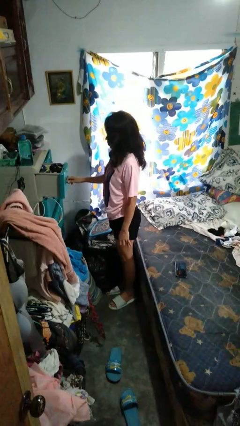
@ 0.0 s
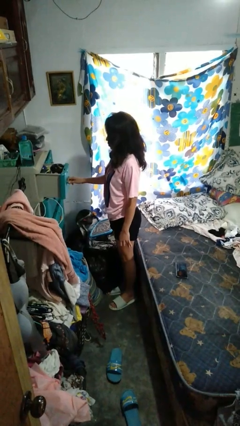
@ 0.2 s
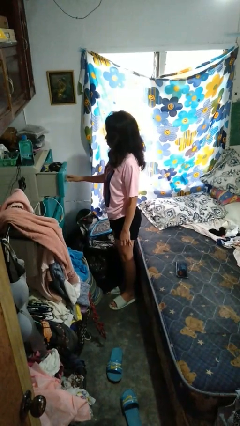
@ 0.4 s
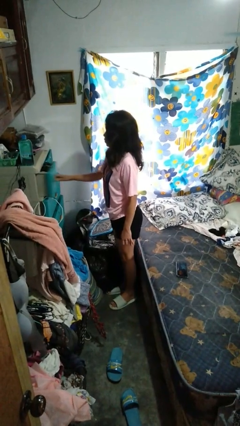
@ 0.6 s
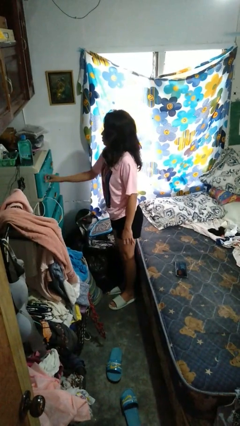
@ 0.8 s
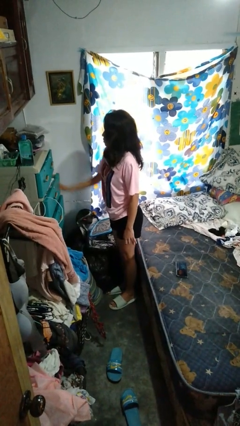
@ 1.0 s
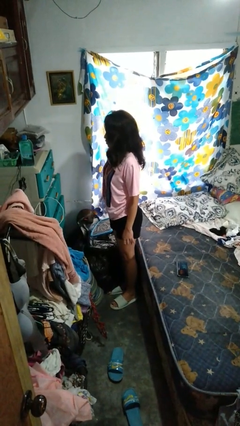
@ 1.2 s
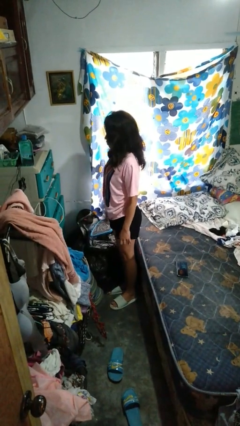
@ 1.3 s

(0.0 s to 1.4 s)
person closes dresser drawer

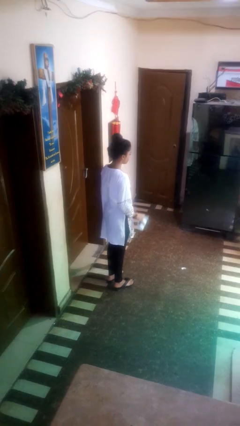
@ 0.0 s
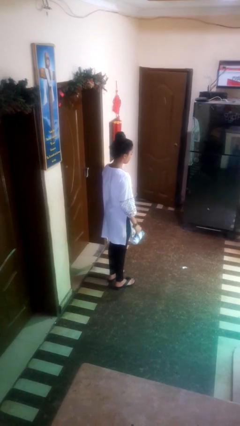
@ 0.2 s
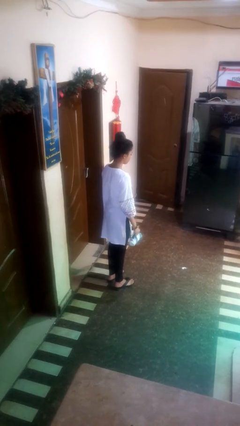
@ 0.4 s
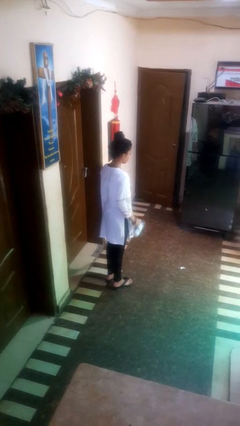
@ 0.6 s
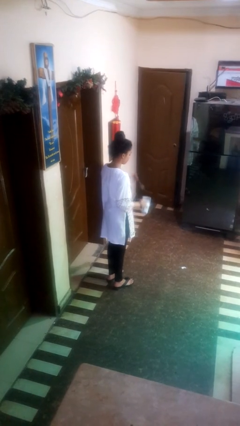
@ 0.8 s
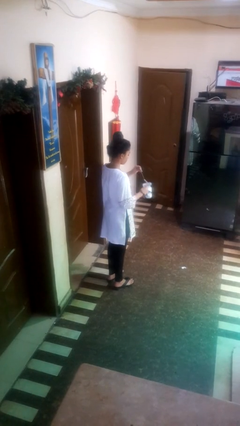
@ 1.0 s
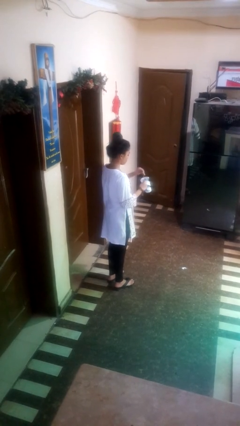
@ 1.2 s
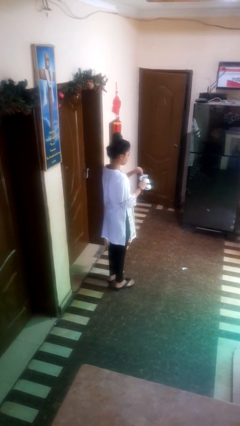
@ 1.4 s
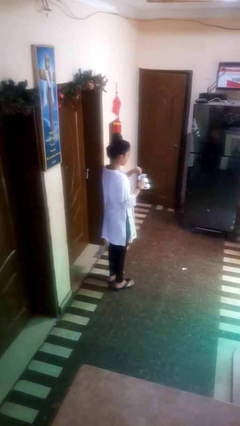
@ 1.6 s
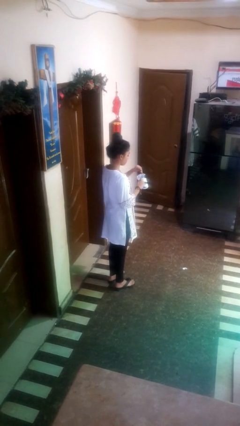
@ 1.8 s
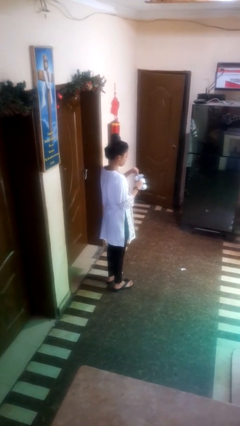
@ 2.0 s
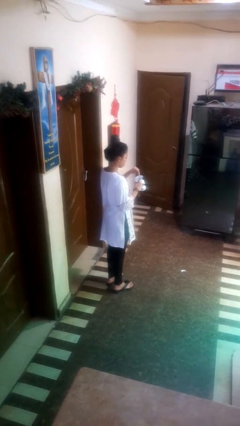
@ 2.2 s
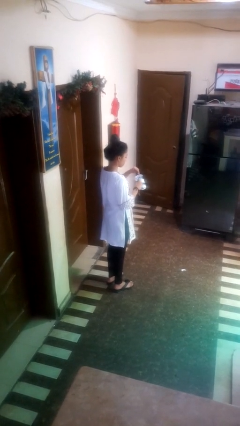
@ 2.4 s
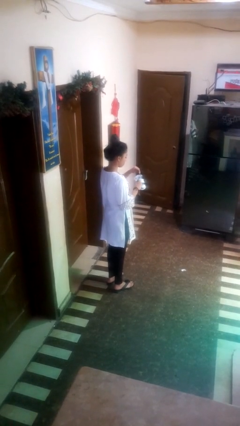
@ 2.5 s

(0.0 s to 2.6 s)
person stirs mug

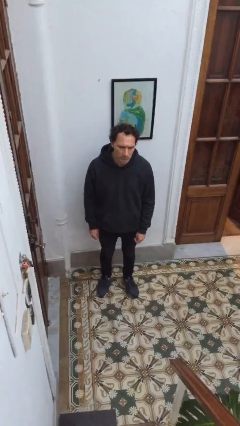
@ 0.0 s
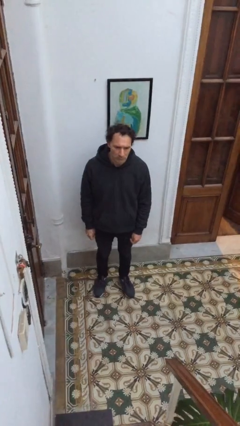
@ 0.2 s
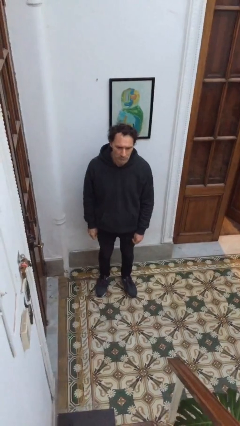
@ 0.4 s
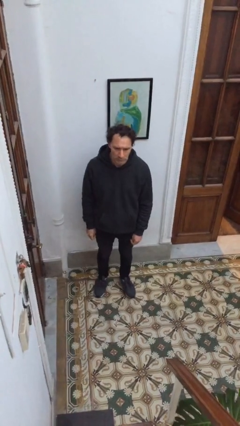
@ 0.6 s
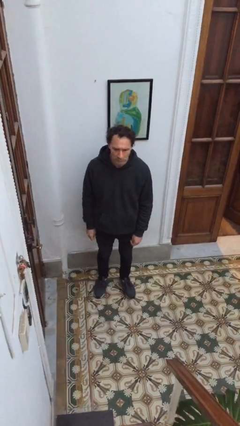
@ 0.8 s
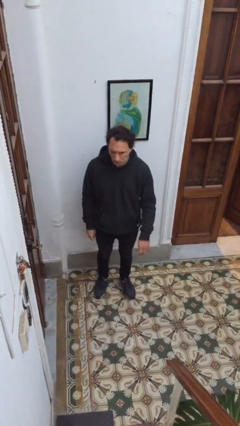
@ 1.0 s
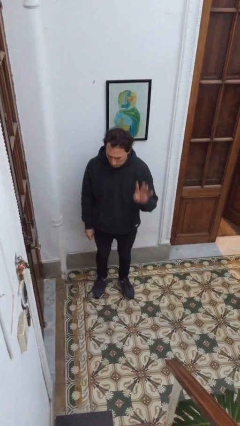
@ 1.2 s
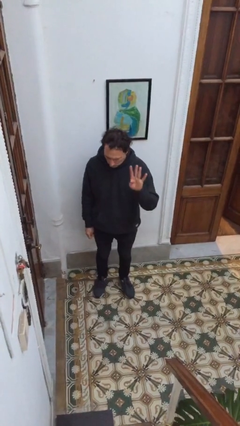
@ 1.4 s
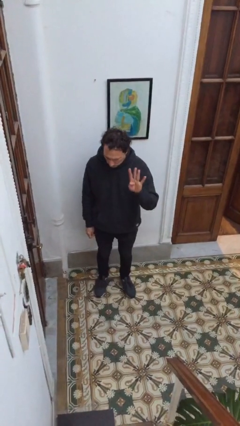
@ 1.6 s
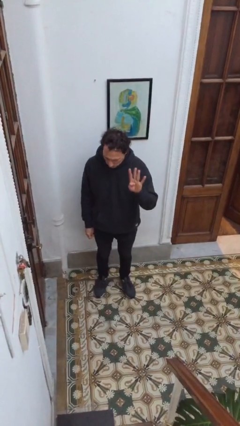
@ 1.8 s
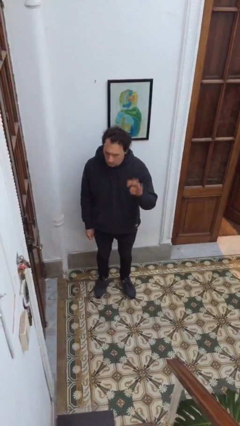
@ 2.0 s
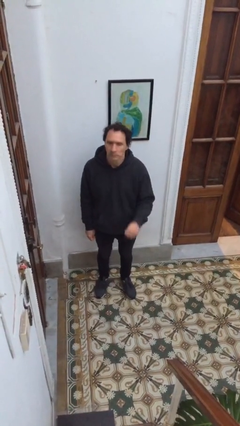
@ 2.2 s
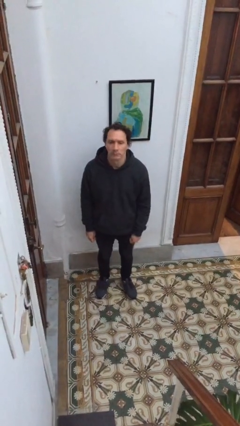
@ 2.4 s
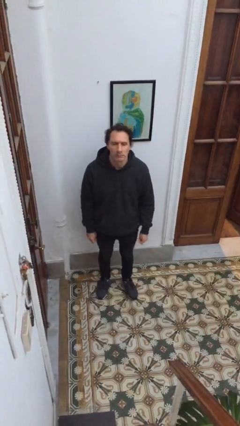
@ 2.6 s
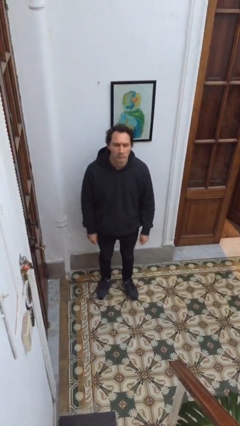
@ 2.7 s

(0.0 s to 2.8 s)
person gestures number four

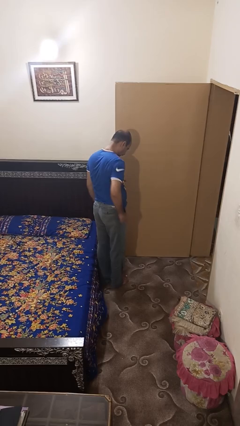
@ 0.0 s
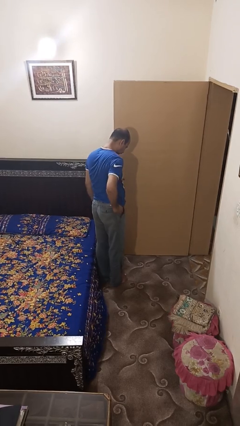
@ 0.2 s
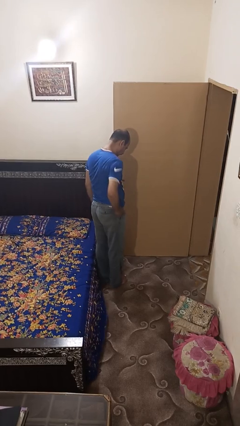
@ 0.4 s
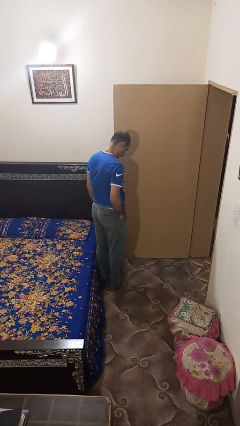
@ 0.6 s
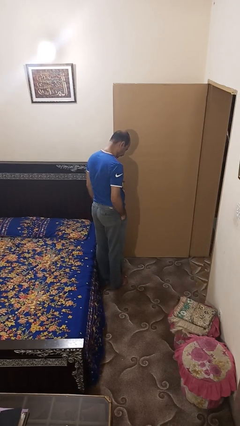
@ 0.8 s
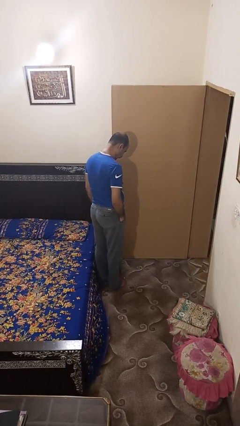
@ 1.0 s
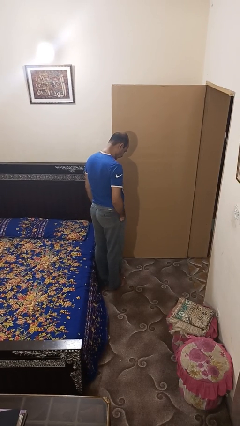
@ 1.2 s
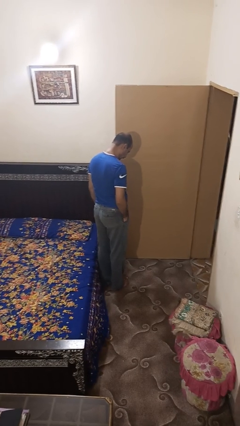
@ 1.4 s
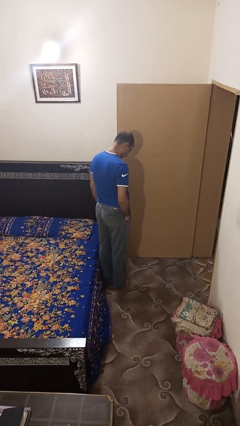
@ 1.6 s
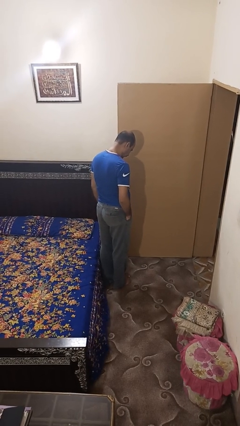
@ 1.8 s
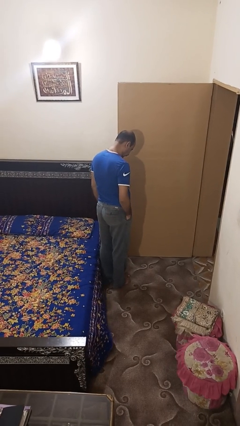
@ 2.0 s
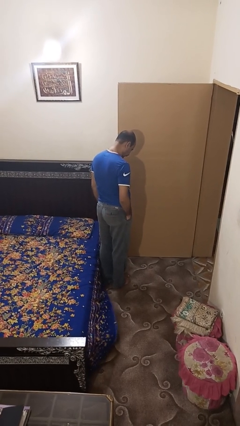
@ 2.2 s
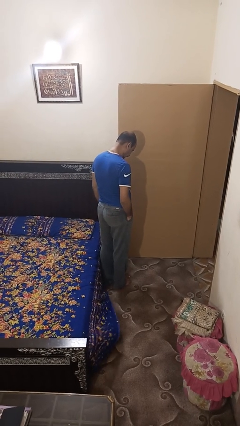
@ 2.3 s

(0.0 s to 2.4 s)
person puts hands in back pockets

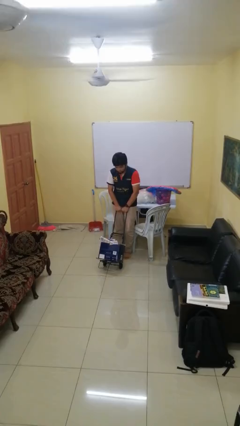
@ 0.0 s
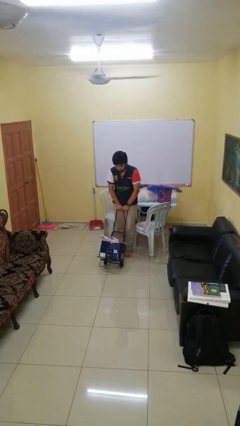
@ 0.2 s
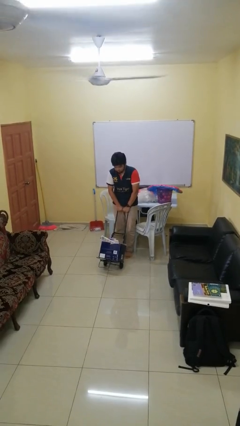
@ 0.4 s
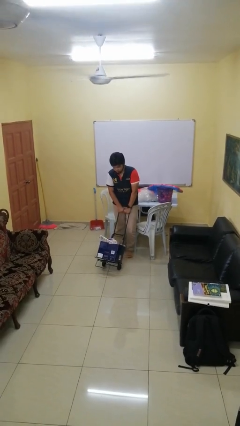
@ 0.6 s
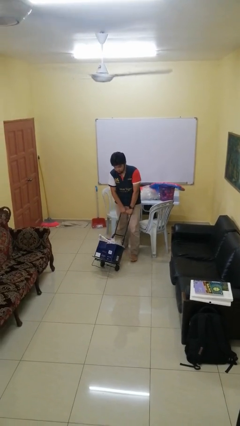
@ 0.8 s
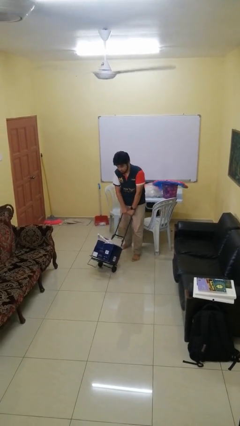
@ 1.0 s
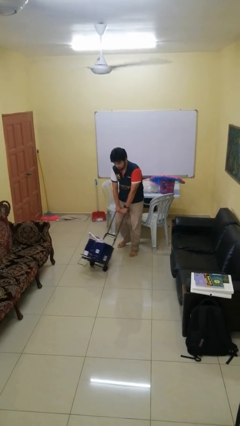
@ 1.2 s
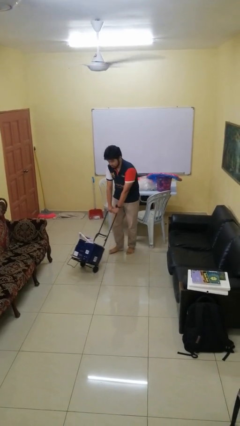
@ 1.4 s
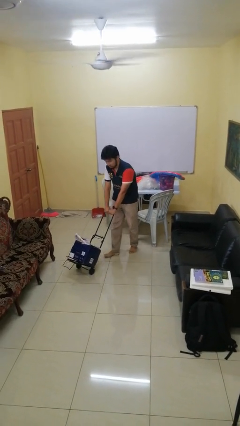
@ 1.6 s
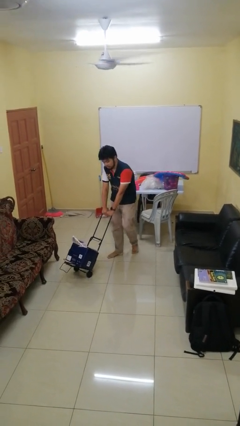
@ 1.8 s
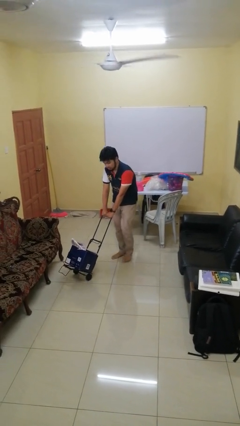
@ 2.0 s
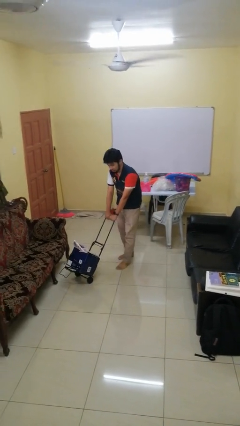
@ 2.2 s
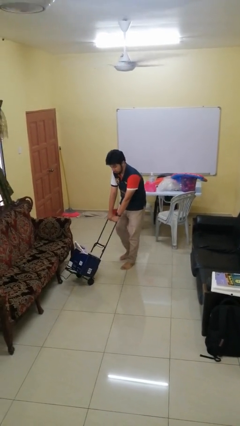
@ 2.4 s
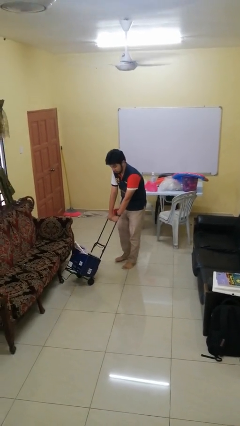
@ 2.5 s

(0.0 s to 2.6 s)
person pushes wheeled cart

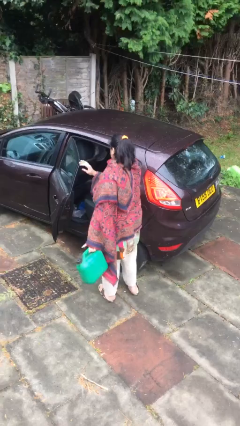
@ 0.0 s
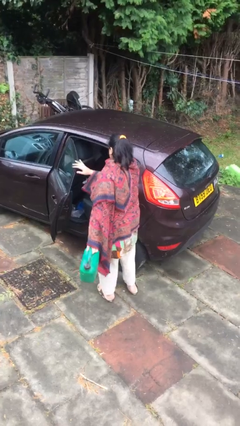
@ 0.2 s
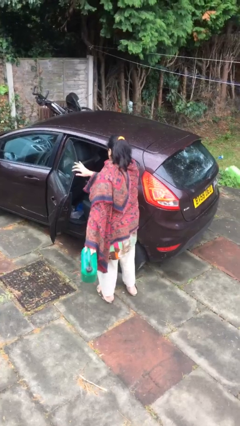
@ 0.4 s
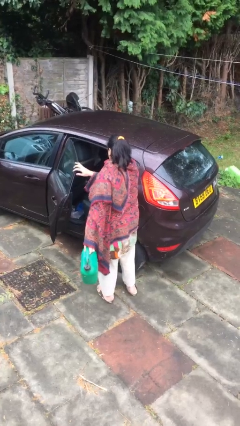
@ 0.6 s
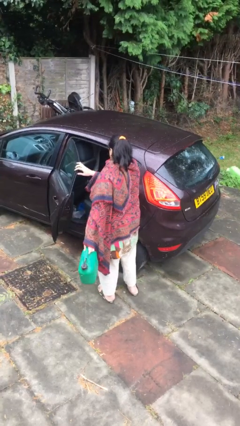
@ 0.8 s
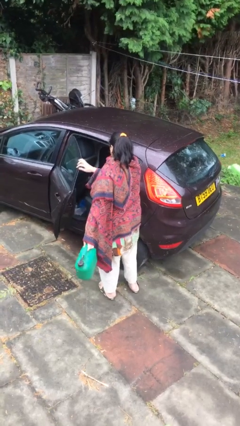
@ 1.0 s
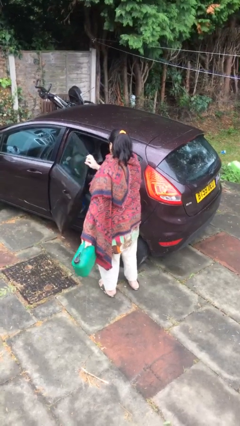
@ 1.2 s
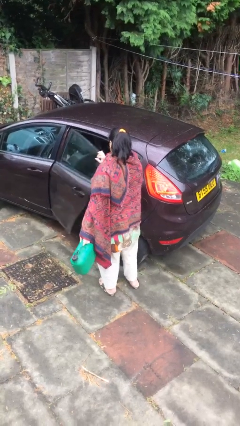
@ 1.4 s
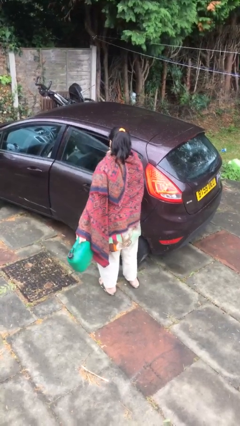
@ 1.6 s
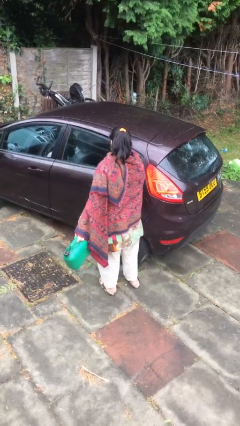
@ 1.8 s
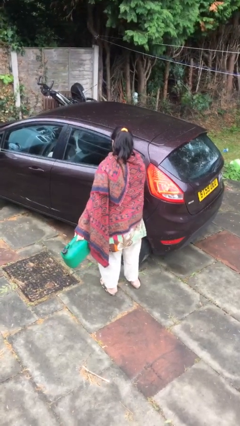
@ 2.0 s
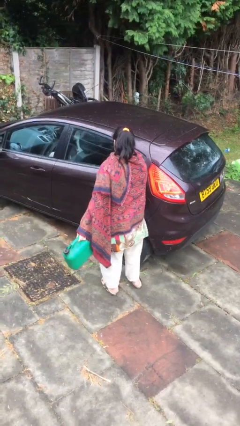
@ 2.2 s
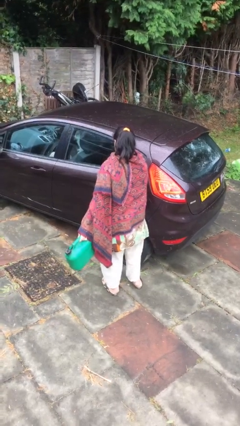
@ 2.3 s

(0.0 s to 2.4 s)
person closes car door

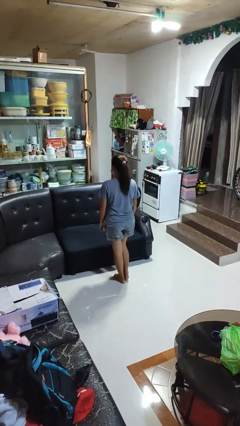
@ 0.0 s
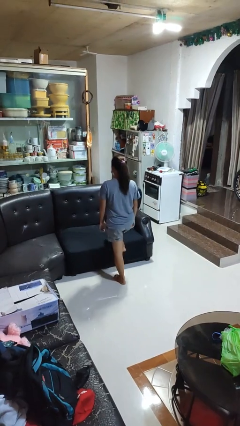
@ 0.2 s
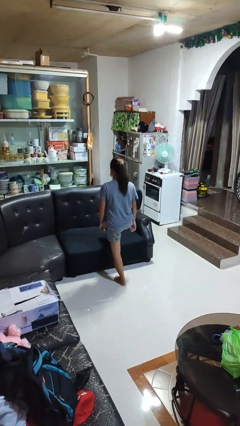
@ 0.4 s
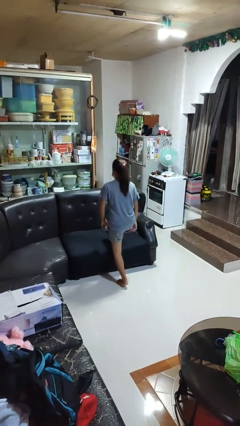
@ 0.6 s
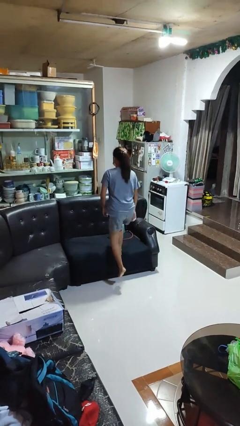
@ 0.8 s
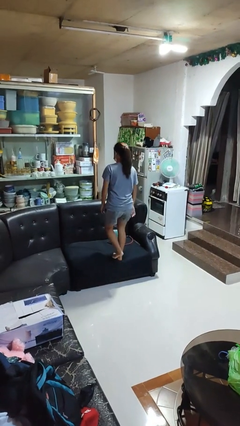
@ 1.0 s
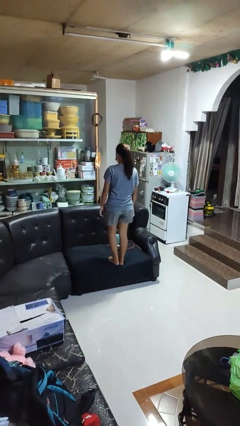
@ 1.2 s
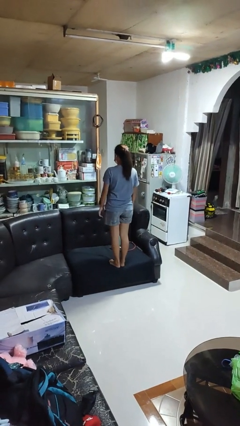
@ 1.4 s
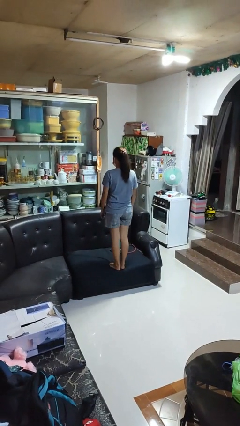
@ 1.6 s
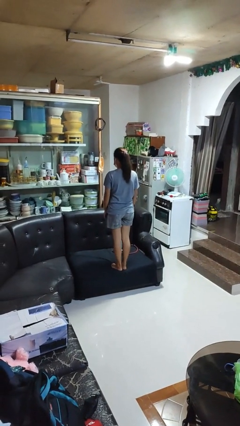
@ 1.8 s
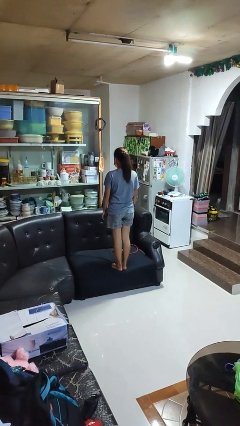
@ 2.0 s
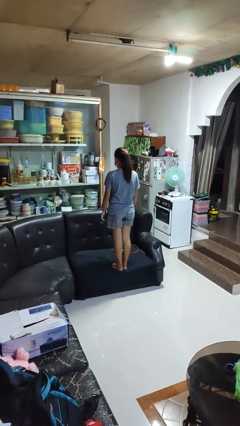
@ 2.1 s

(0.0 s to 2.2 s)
person climbs on couch

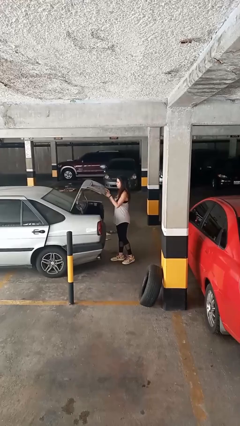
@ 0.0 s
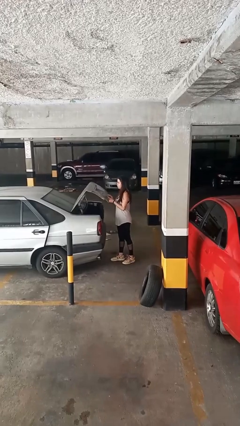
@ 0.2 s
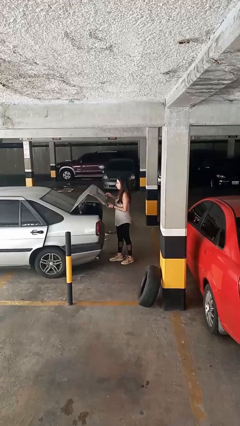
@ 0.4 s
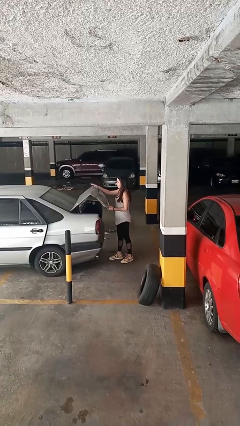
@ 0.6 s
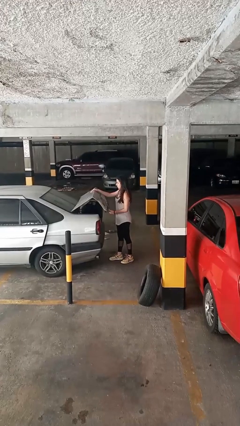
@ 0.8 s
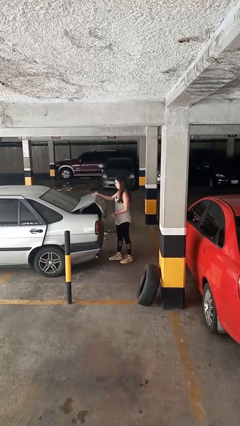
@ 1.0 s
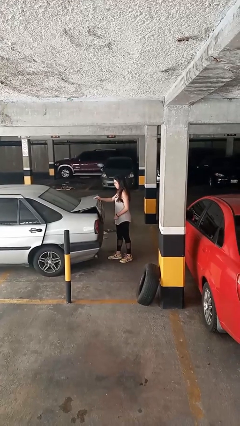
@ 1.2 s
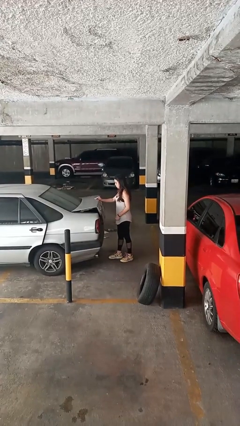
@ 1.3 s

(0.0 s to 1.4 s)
person closes car trunk
